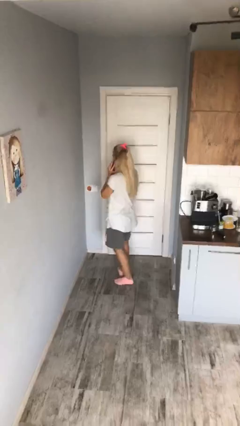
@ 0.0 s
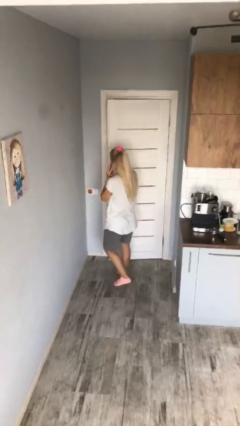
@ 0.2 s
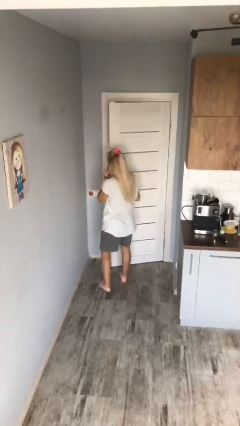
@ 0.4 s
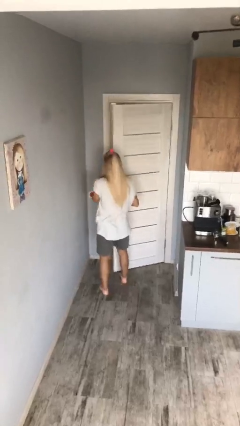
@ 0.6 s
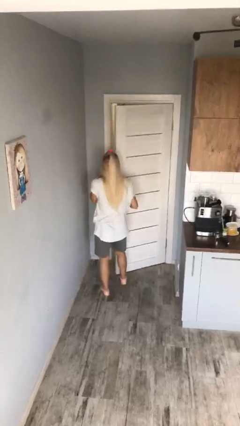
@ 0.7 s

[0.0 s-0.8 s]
person opens facility door

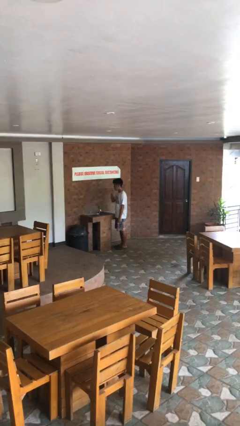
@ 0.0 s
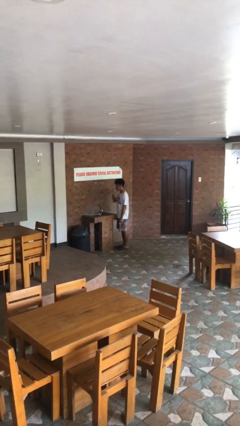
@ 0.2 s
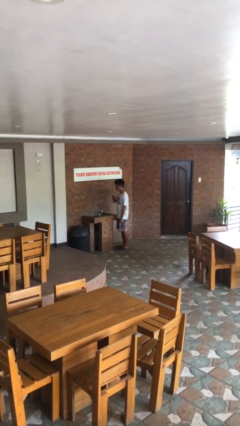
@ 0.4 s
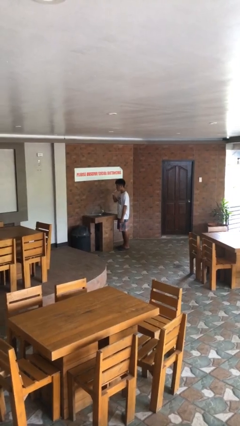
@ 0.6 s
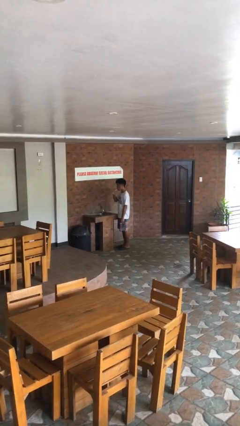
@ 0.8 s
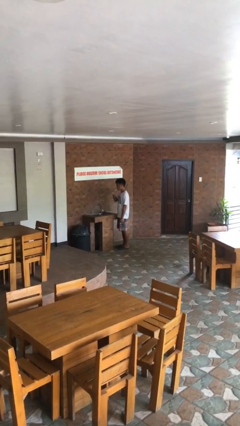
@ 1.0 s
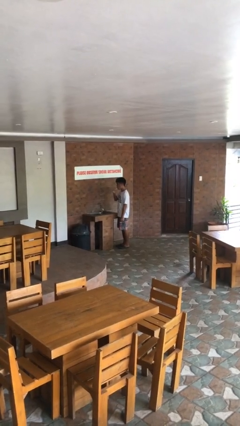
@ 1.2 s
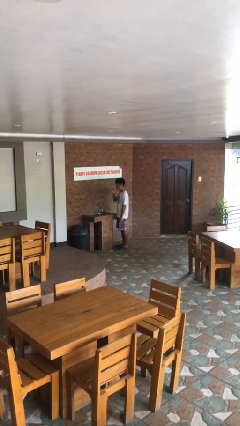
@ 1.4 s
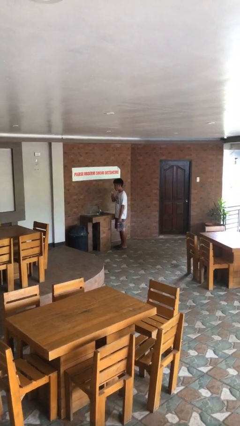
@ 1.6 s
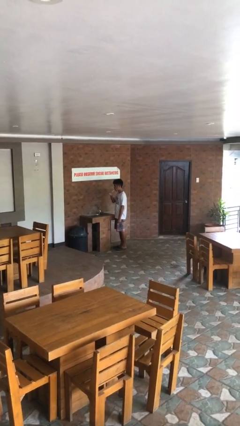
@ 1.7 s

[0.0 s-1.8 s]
person brushes teeth

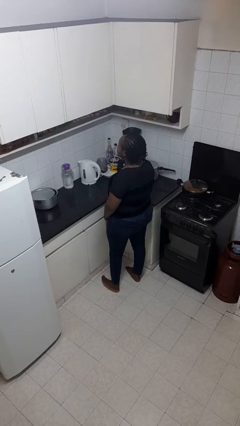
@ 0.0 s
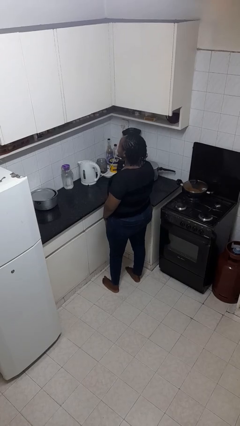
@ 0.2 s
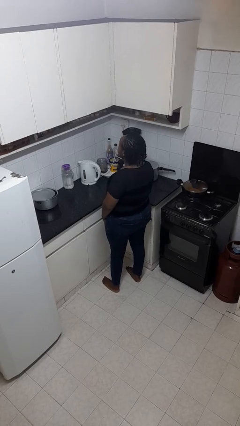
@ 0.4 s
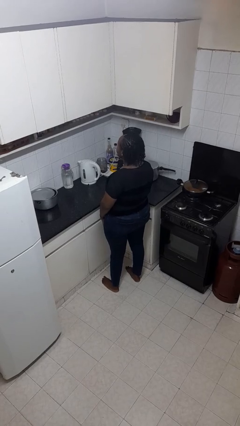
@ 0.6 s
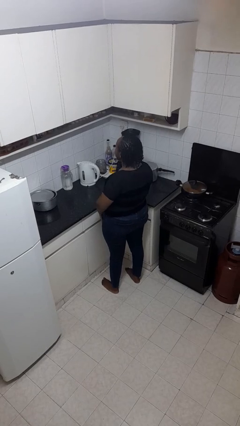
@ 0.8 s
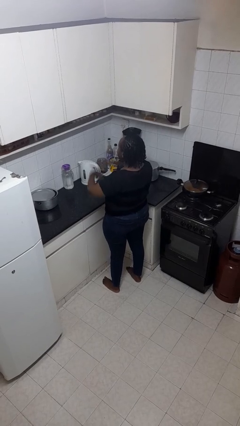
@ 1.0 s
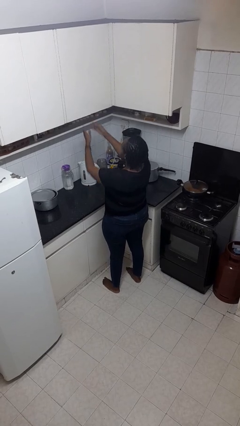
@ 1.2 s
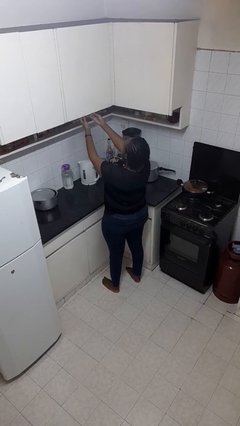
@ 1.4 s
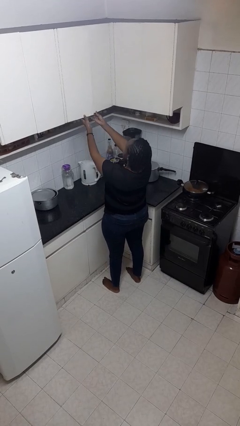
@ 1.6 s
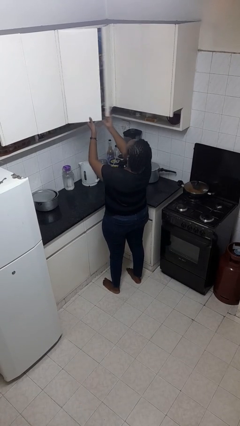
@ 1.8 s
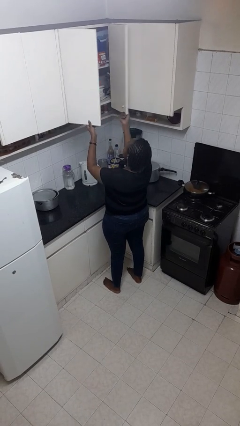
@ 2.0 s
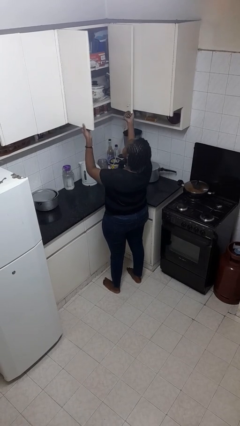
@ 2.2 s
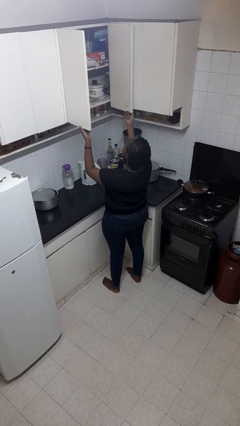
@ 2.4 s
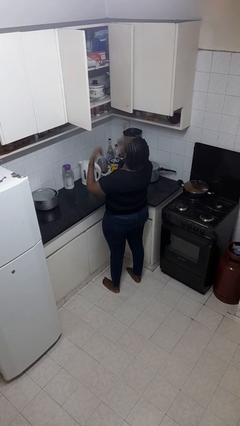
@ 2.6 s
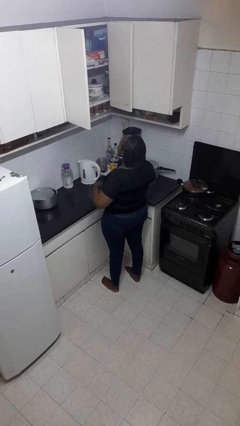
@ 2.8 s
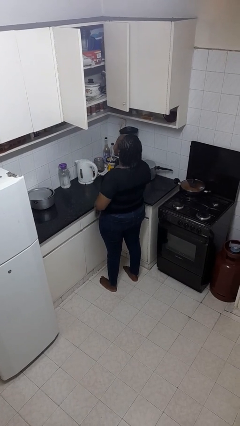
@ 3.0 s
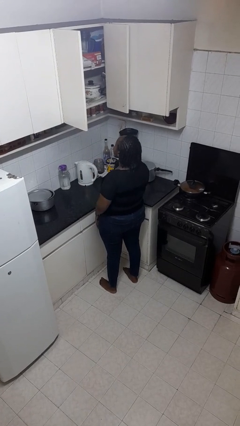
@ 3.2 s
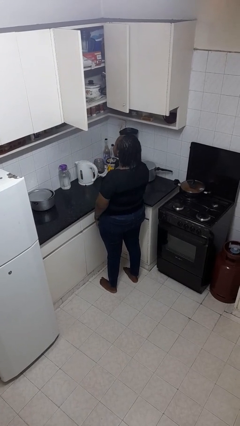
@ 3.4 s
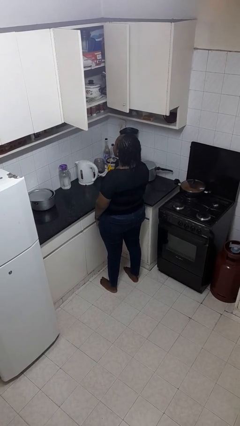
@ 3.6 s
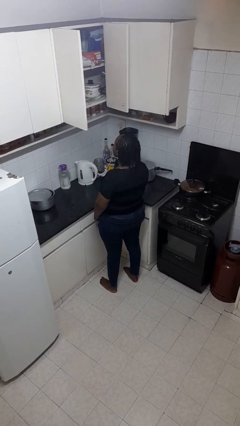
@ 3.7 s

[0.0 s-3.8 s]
person opens cabinet

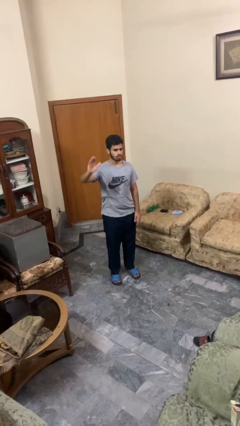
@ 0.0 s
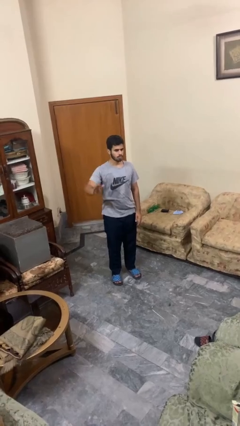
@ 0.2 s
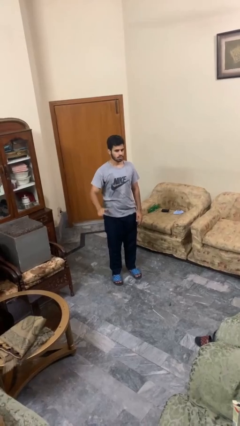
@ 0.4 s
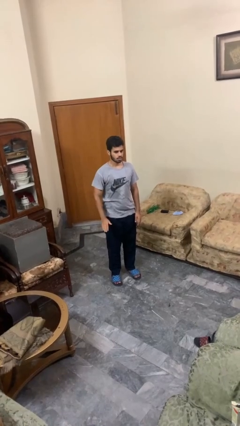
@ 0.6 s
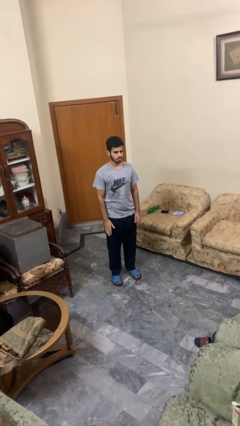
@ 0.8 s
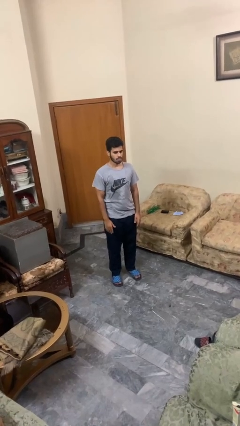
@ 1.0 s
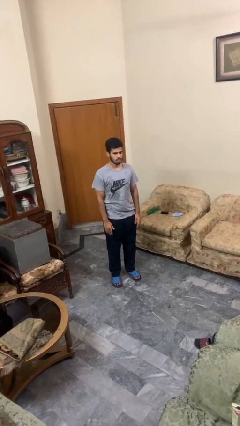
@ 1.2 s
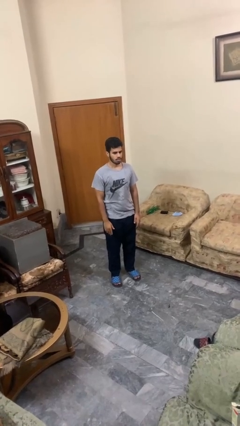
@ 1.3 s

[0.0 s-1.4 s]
person gestures lower hand

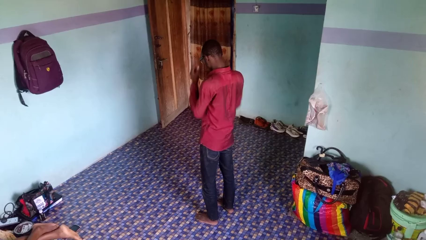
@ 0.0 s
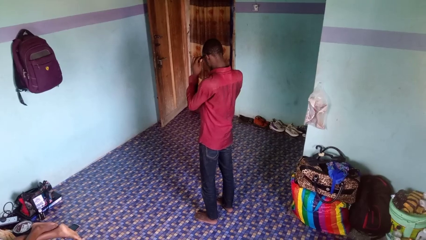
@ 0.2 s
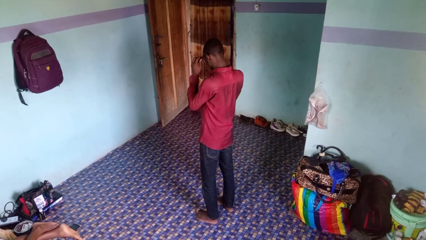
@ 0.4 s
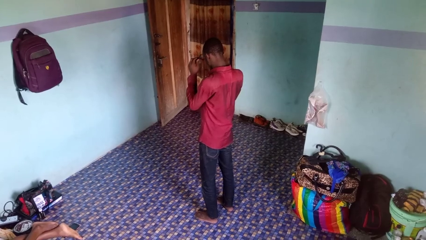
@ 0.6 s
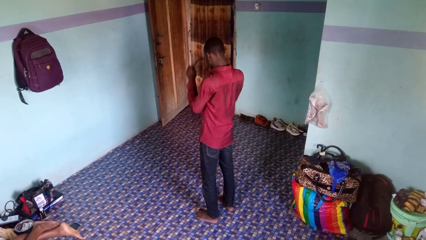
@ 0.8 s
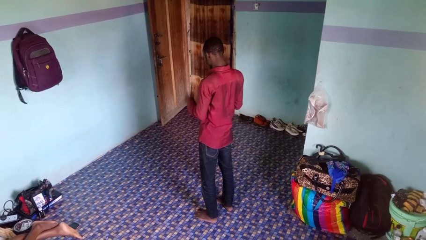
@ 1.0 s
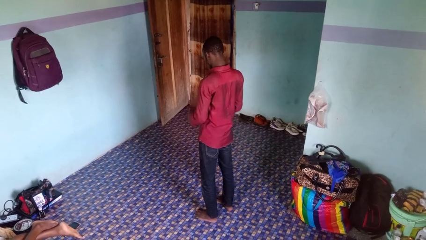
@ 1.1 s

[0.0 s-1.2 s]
person takes off glasses

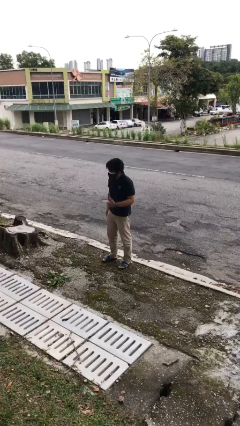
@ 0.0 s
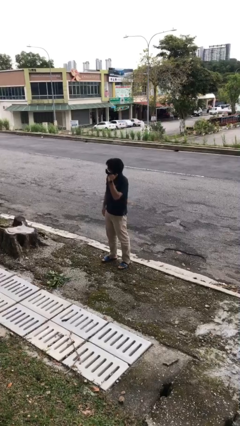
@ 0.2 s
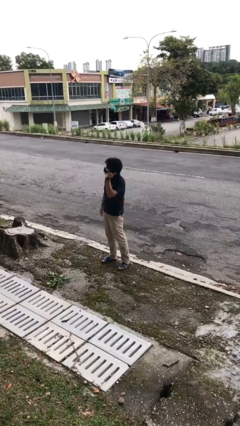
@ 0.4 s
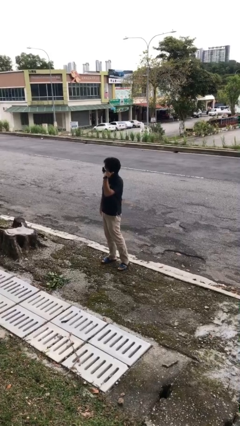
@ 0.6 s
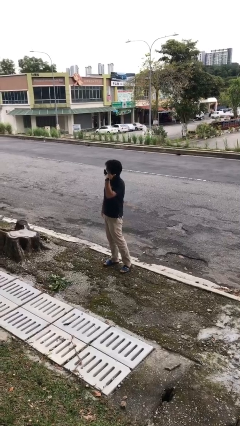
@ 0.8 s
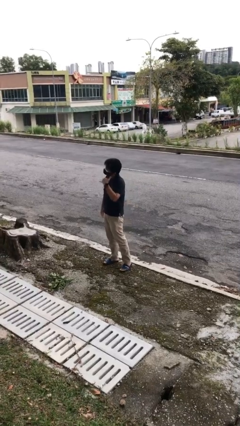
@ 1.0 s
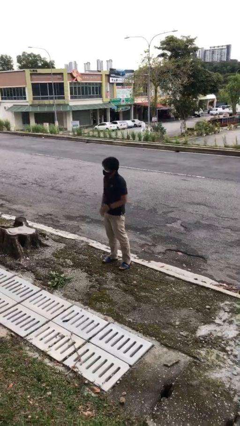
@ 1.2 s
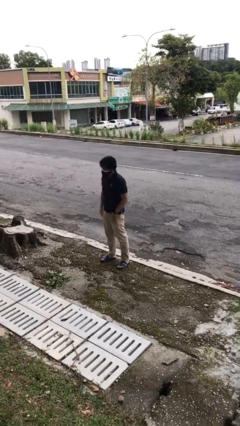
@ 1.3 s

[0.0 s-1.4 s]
person gestures call me

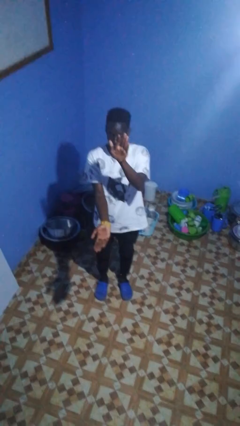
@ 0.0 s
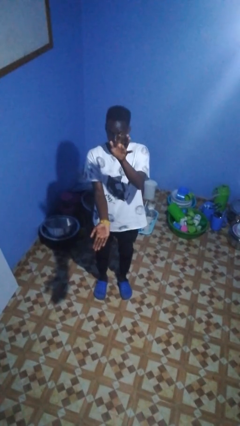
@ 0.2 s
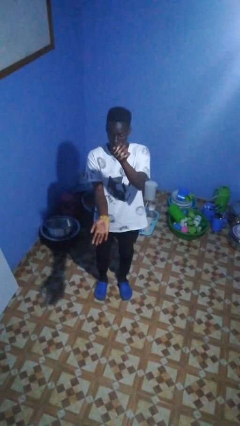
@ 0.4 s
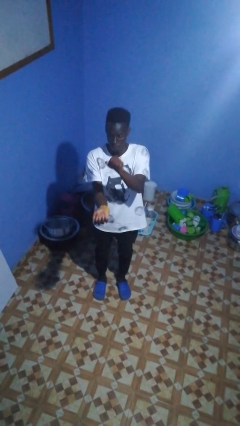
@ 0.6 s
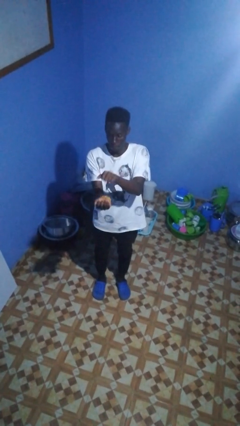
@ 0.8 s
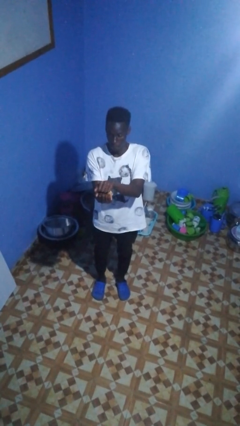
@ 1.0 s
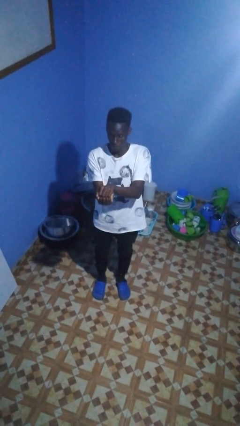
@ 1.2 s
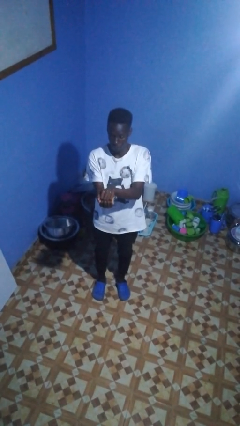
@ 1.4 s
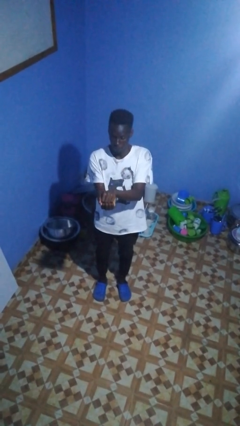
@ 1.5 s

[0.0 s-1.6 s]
person gestures zoom out

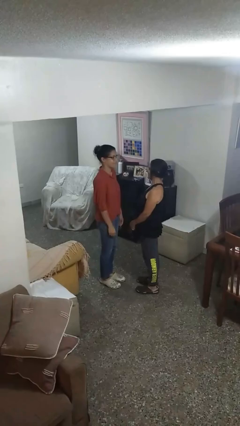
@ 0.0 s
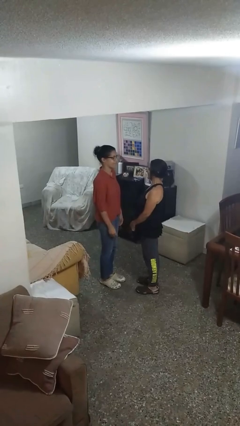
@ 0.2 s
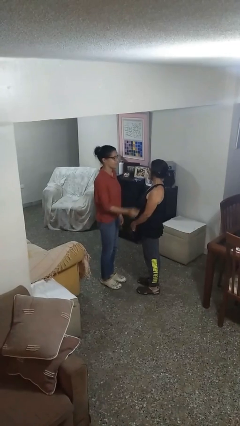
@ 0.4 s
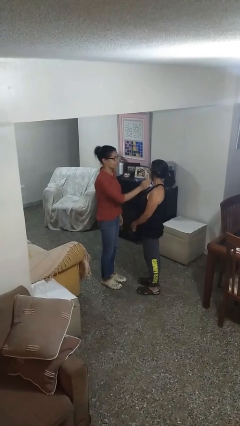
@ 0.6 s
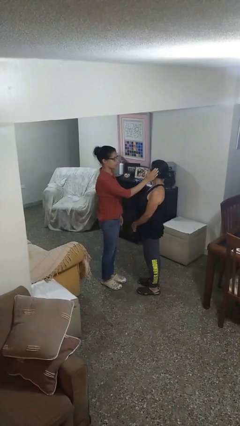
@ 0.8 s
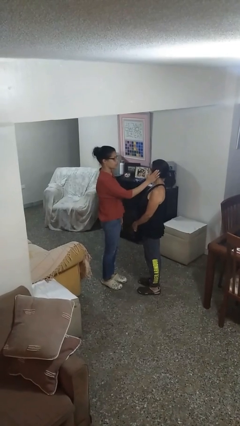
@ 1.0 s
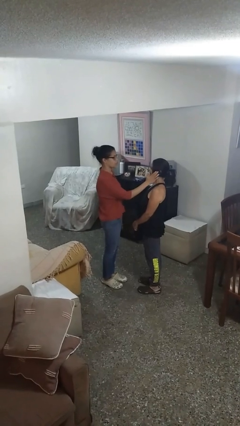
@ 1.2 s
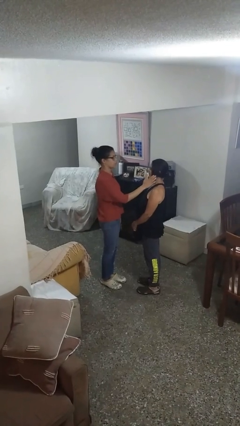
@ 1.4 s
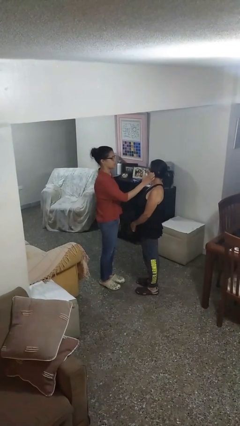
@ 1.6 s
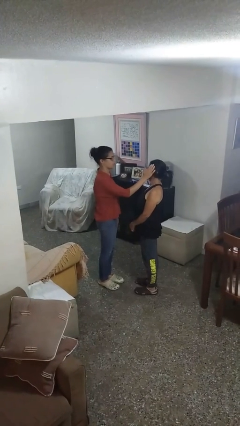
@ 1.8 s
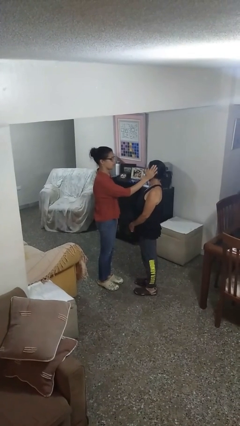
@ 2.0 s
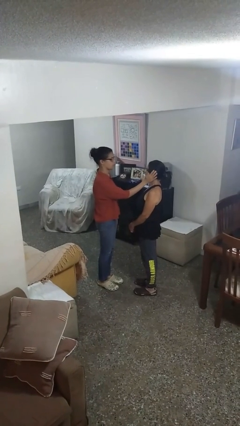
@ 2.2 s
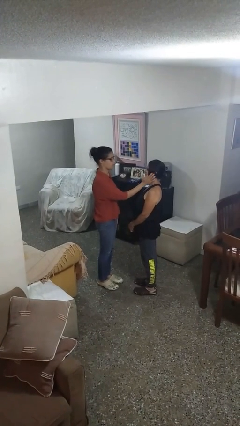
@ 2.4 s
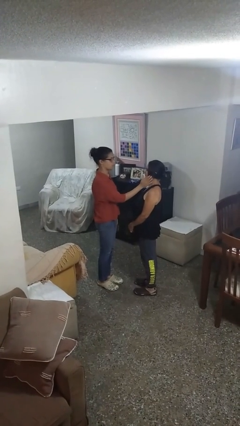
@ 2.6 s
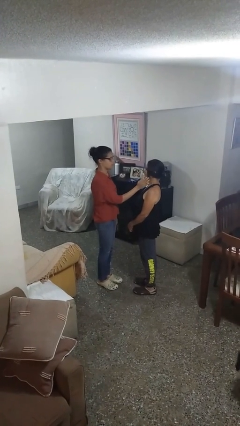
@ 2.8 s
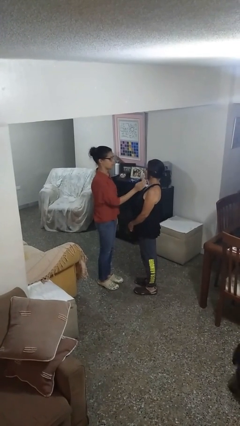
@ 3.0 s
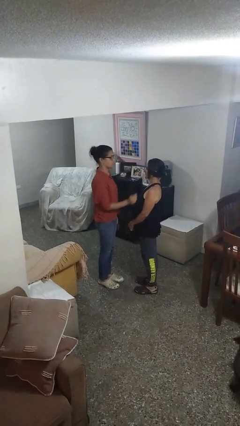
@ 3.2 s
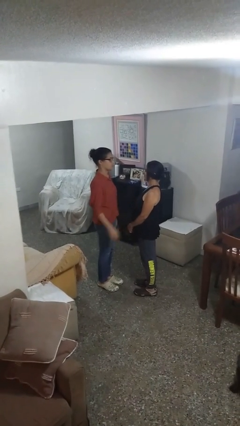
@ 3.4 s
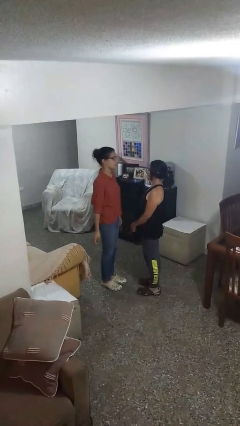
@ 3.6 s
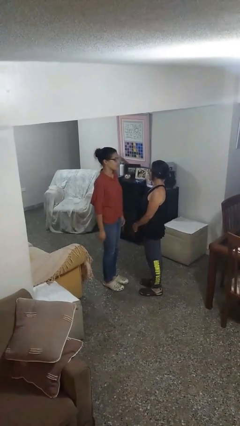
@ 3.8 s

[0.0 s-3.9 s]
person touches face of person

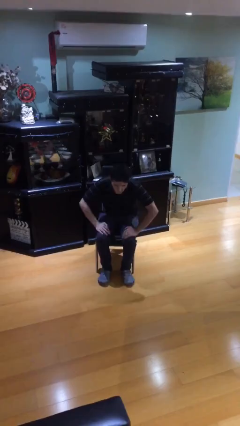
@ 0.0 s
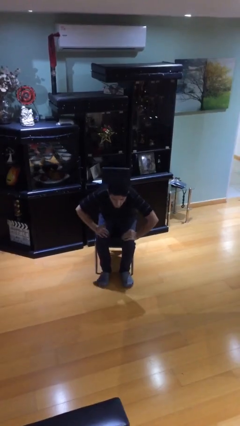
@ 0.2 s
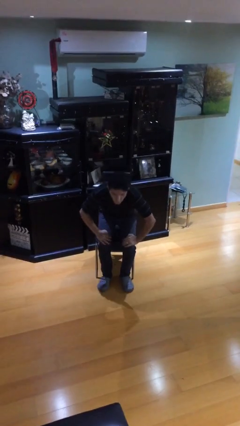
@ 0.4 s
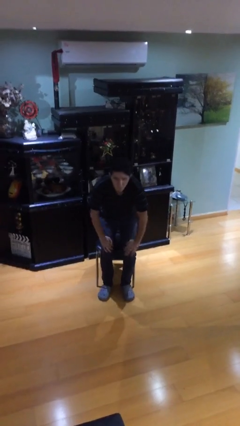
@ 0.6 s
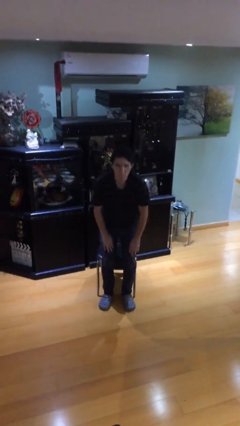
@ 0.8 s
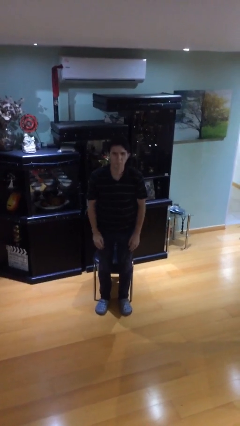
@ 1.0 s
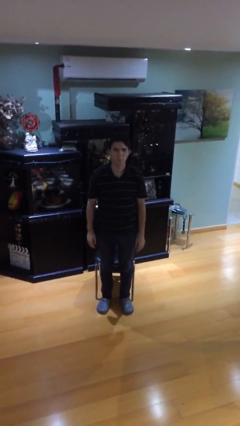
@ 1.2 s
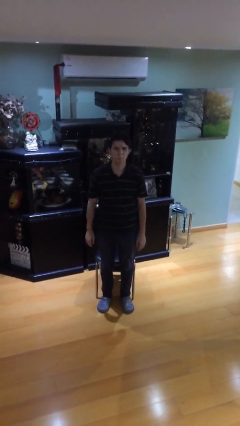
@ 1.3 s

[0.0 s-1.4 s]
person stands up
